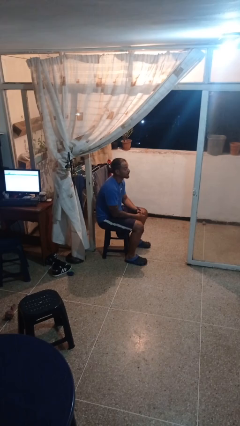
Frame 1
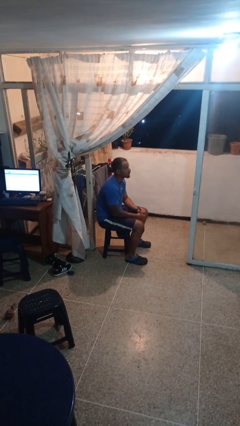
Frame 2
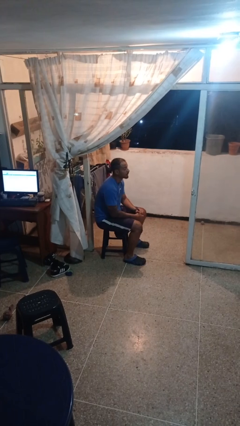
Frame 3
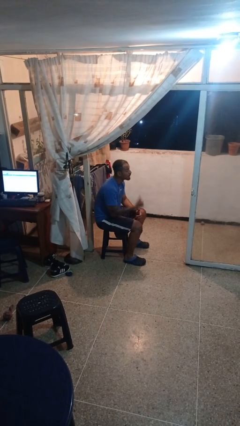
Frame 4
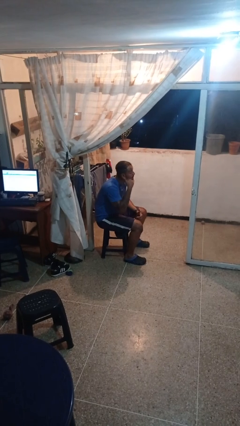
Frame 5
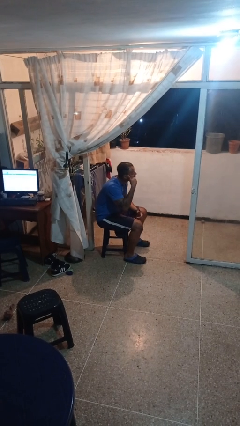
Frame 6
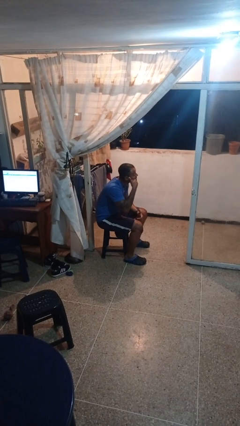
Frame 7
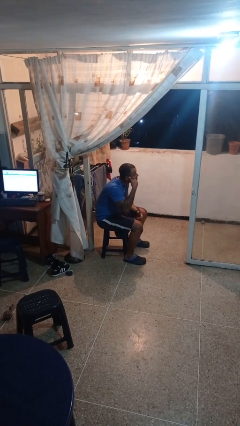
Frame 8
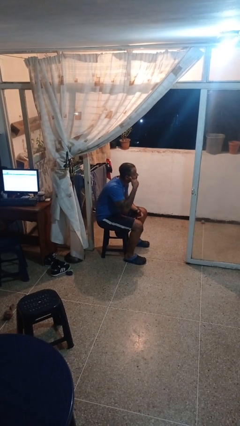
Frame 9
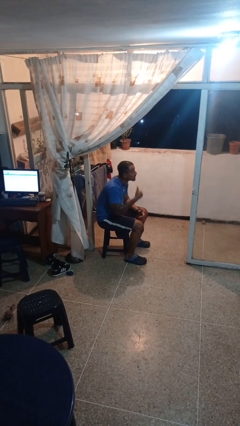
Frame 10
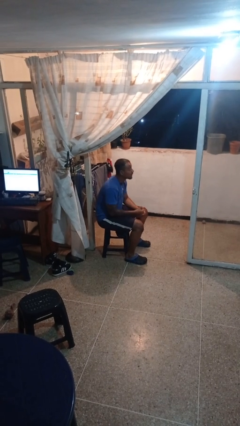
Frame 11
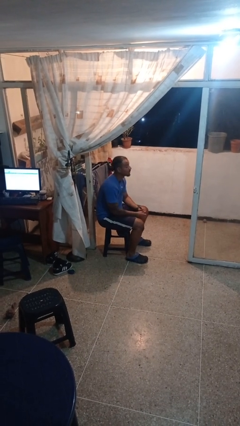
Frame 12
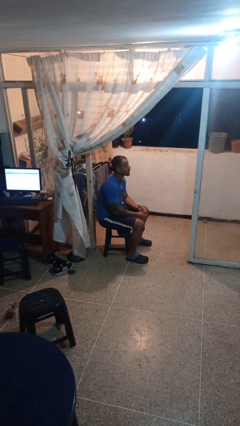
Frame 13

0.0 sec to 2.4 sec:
person gestures call me

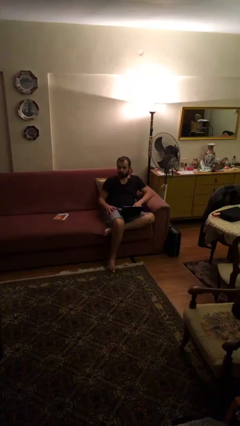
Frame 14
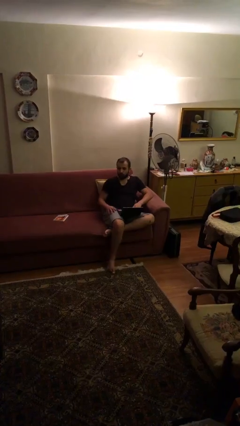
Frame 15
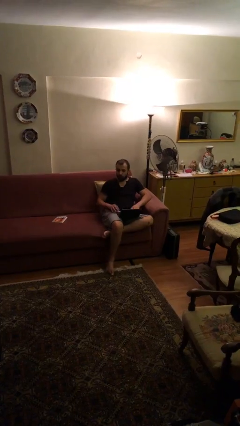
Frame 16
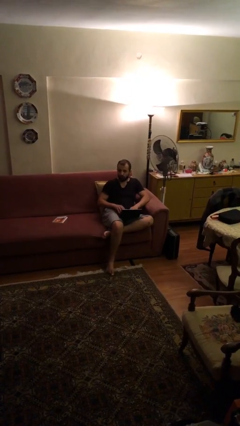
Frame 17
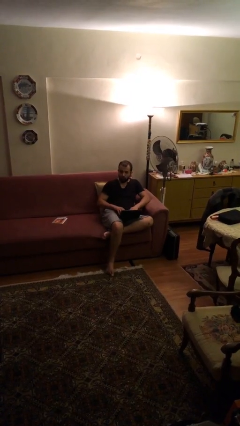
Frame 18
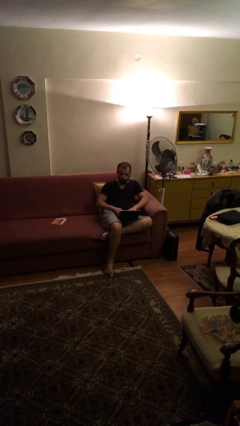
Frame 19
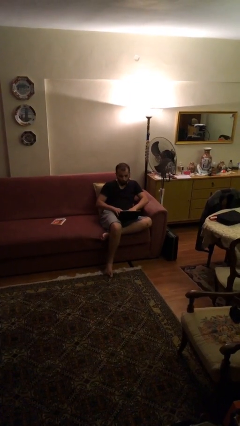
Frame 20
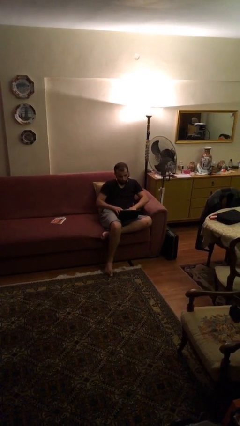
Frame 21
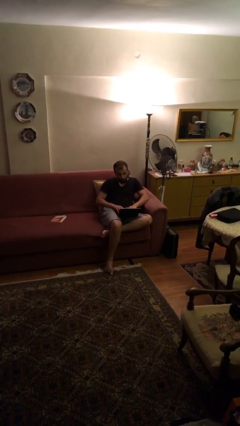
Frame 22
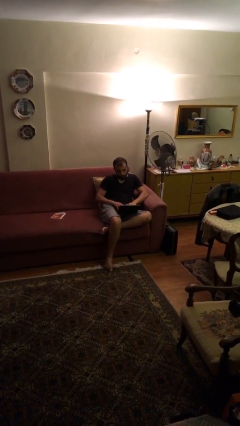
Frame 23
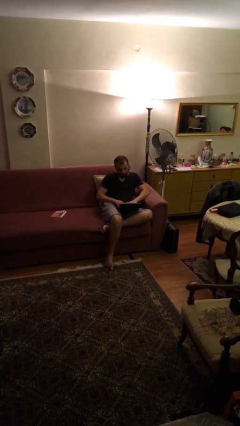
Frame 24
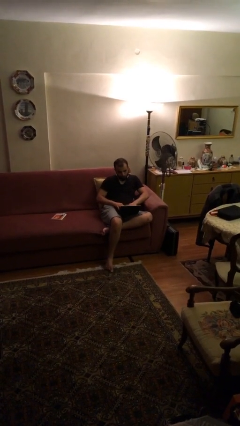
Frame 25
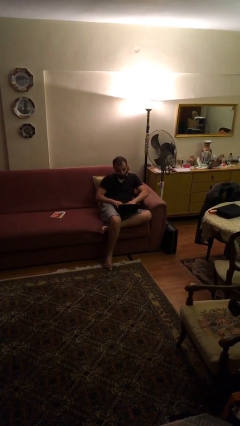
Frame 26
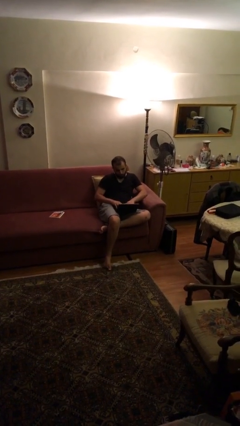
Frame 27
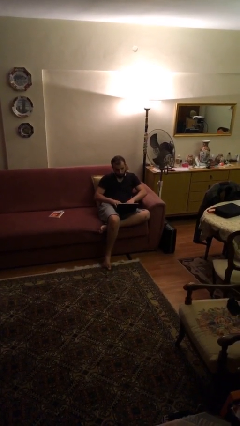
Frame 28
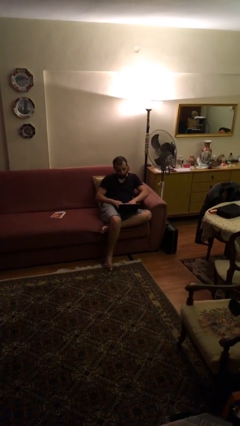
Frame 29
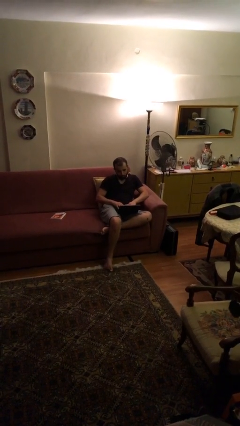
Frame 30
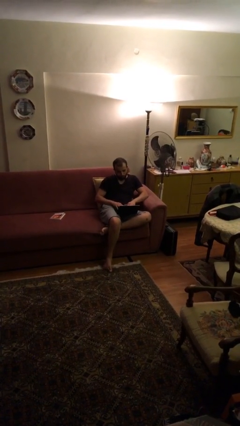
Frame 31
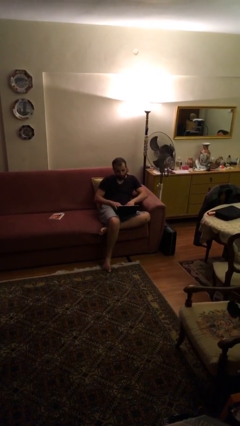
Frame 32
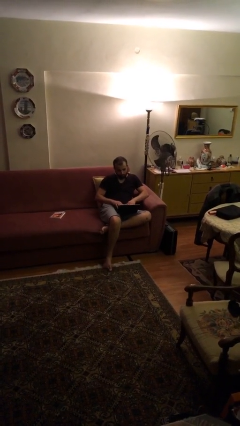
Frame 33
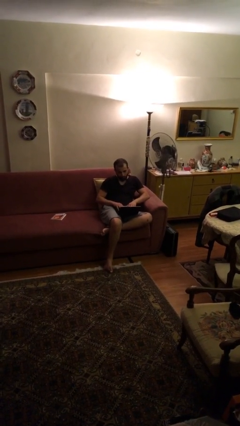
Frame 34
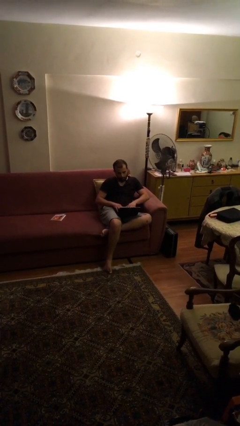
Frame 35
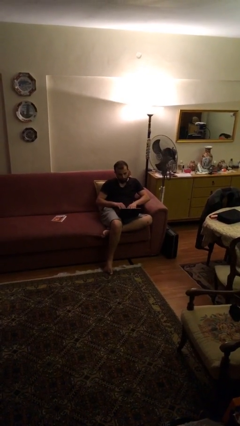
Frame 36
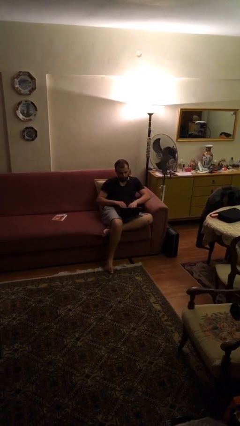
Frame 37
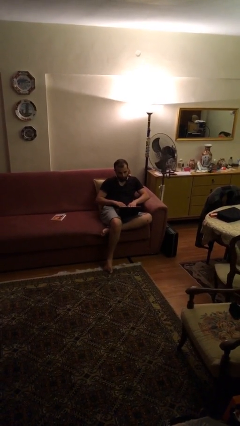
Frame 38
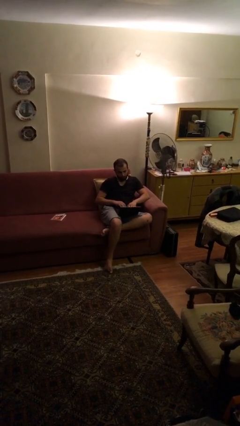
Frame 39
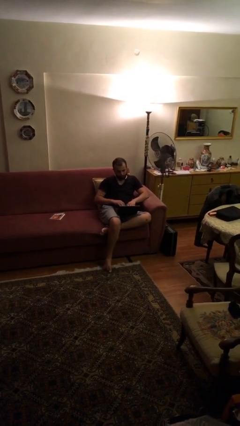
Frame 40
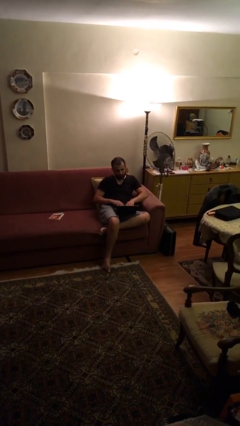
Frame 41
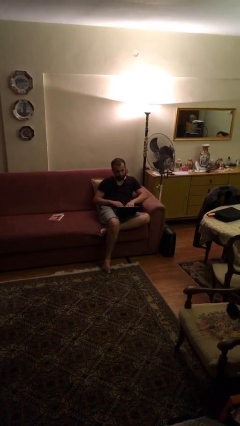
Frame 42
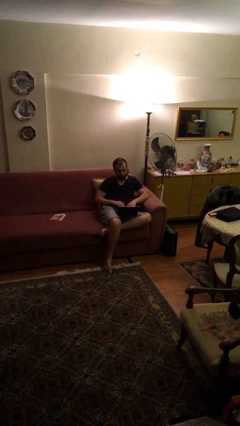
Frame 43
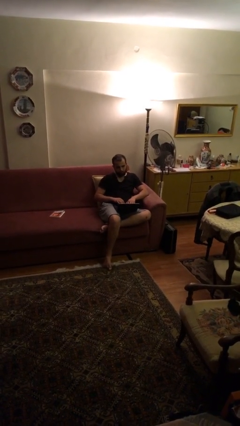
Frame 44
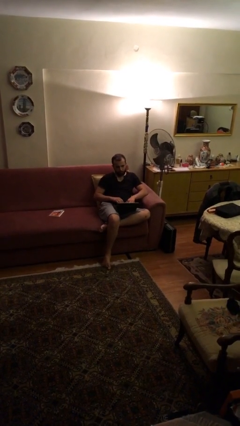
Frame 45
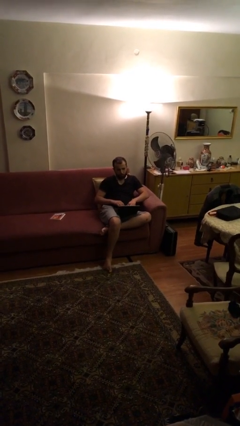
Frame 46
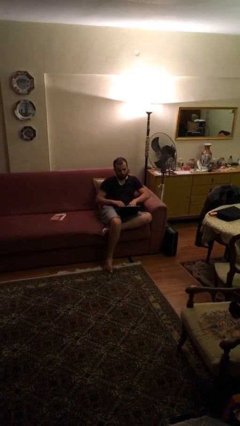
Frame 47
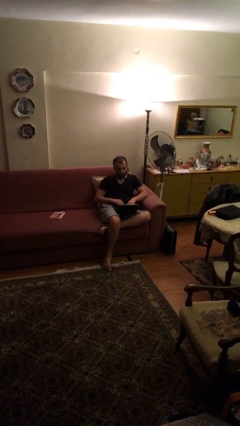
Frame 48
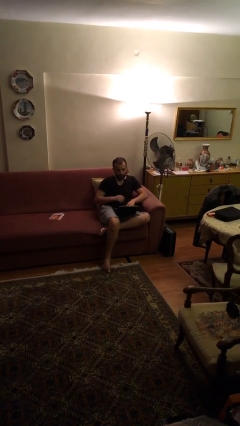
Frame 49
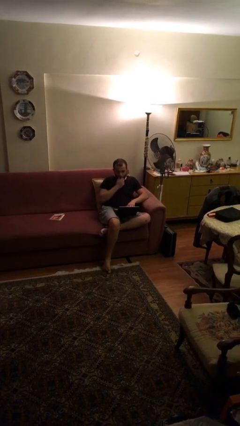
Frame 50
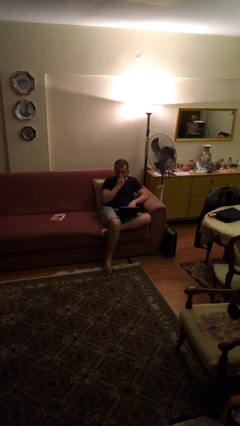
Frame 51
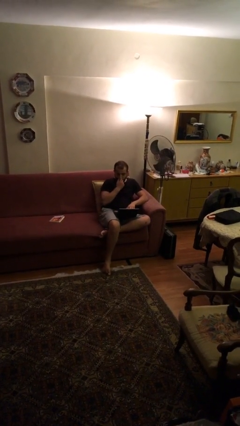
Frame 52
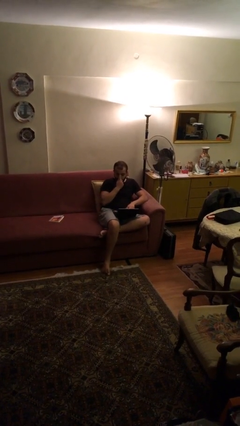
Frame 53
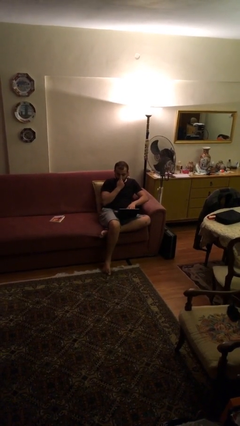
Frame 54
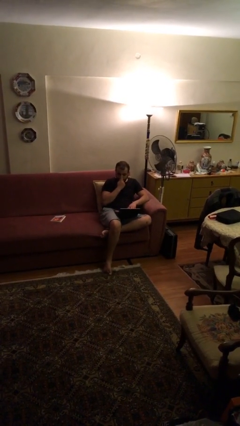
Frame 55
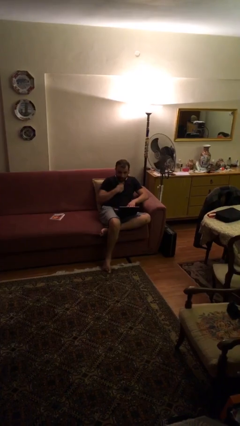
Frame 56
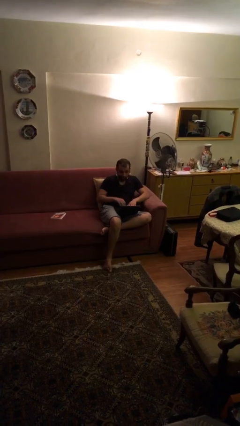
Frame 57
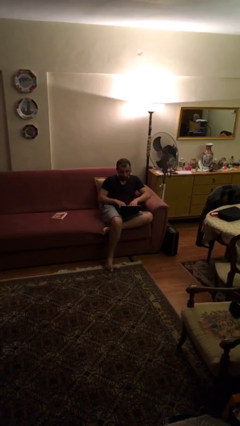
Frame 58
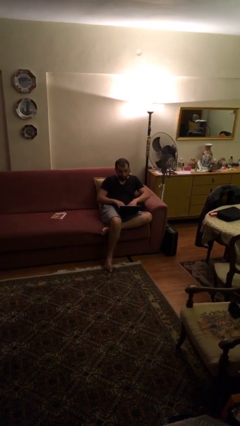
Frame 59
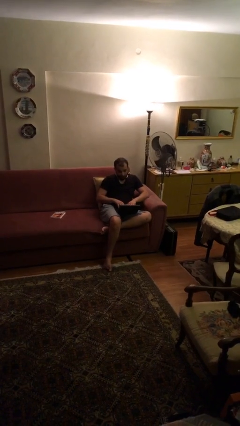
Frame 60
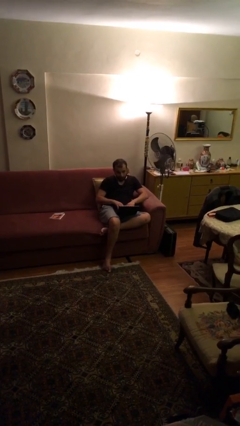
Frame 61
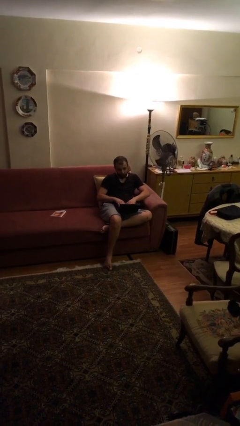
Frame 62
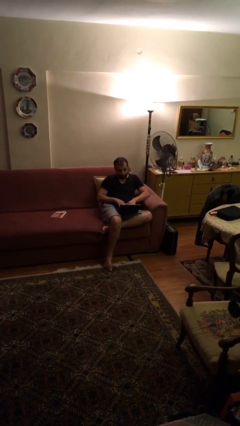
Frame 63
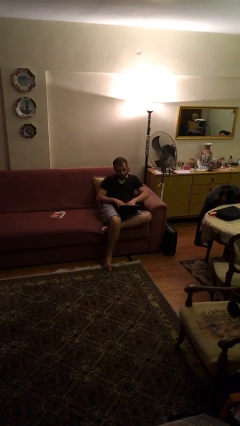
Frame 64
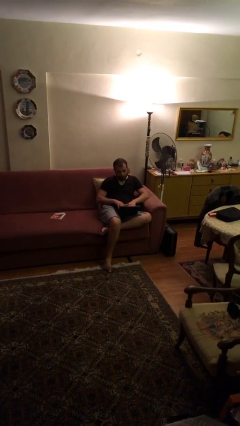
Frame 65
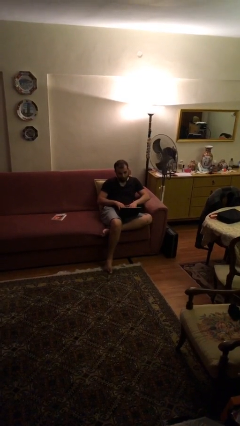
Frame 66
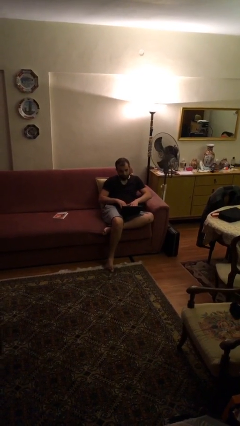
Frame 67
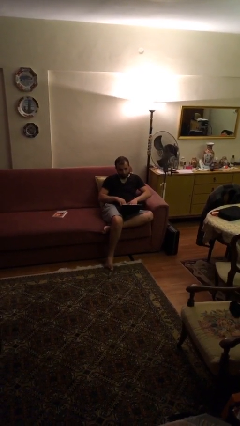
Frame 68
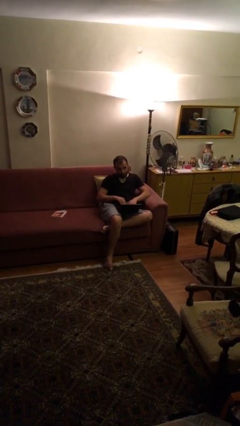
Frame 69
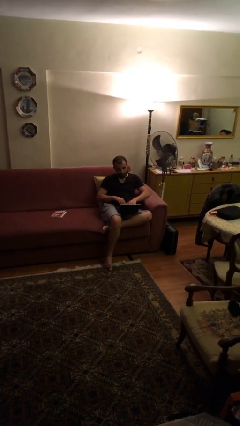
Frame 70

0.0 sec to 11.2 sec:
person interacts with laptop

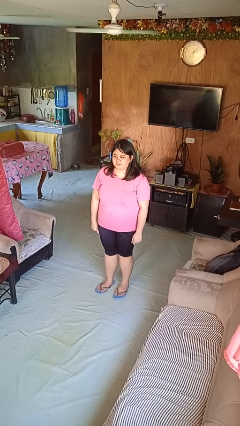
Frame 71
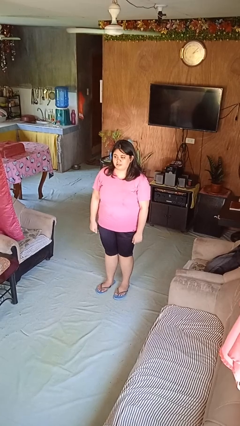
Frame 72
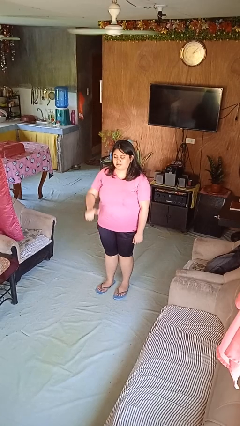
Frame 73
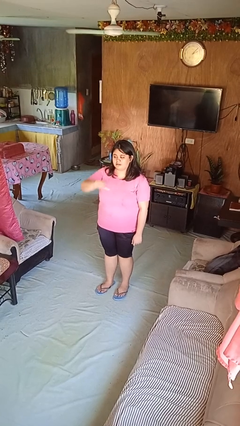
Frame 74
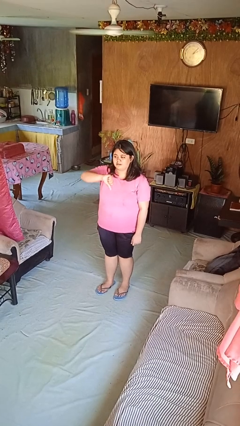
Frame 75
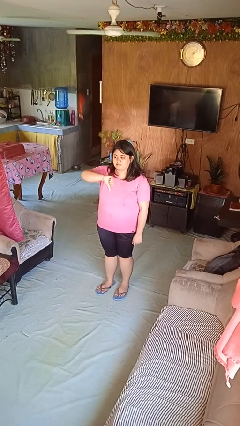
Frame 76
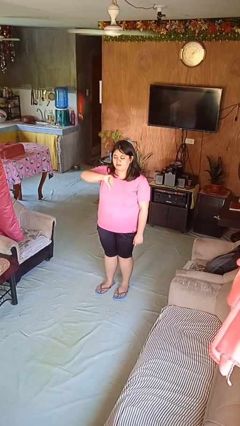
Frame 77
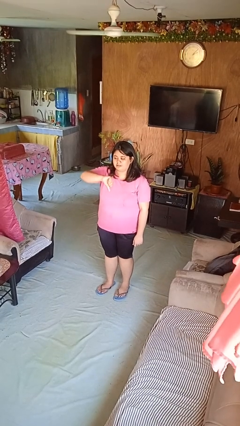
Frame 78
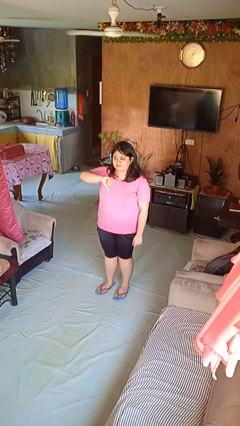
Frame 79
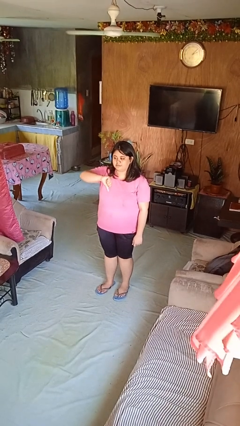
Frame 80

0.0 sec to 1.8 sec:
person gestures thumbs down

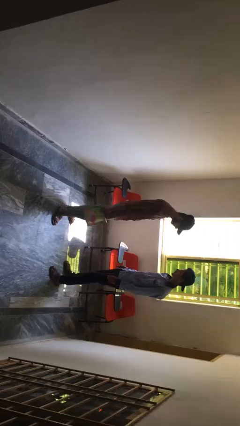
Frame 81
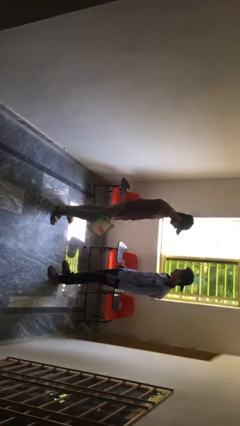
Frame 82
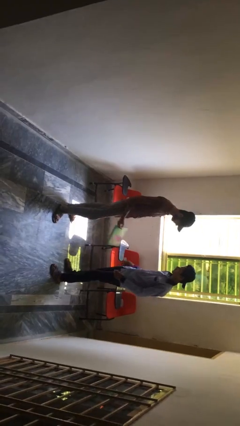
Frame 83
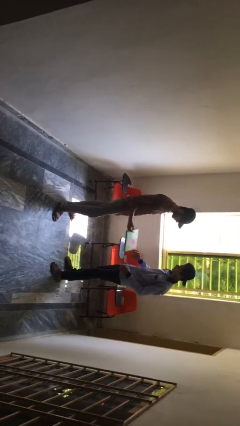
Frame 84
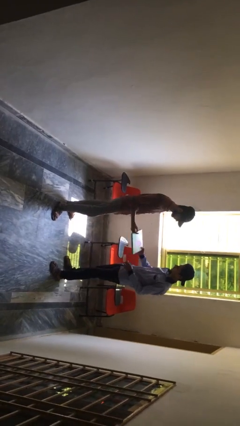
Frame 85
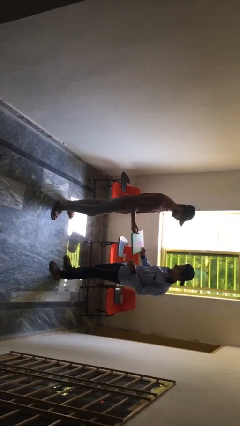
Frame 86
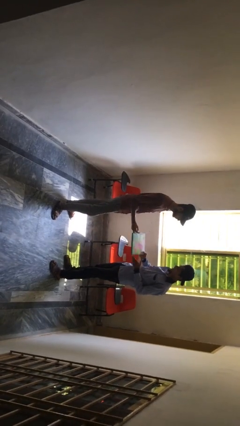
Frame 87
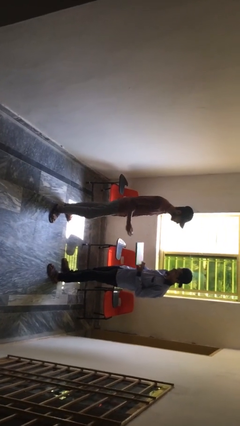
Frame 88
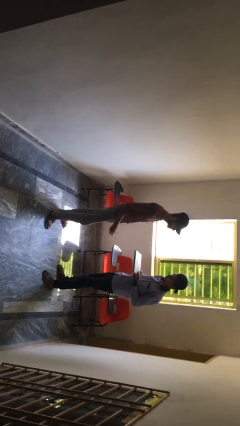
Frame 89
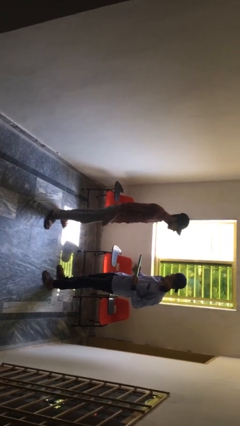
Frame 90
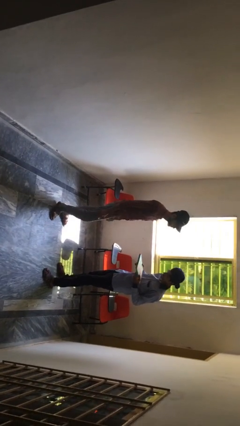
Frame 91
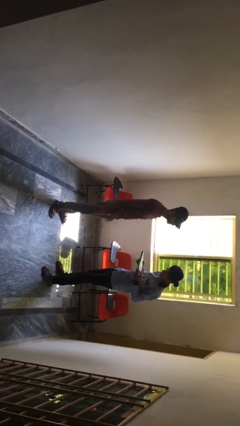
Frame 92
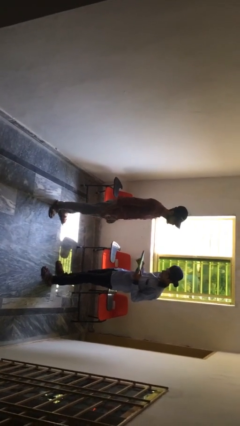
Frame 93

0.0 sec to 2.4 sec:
person transfers object to person
